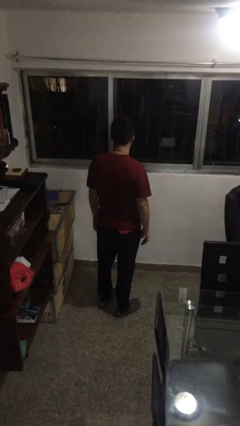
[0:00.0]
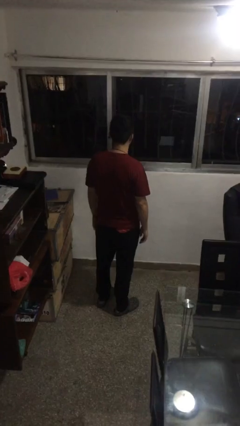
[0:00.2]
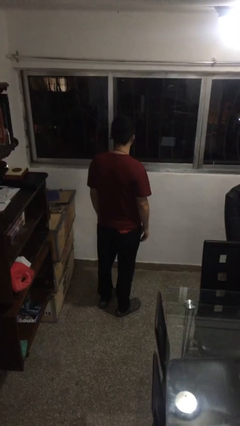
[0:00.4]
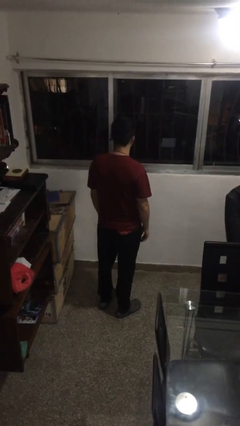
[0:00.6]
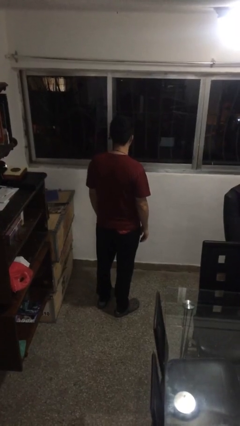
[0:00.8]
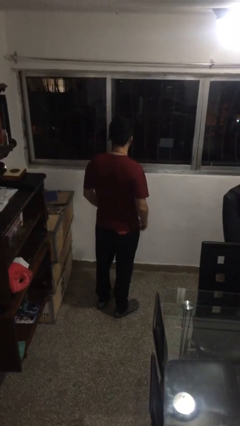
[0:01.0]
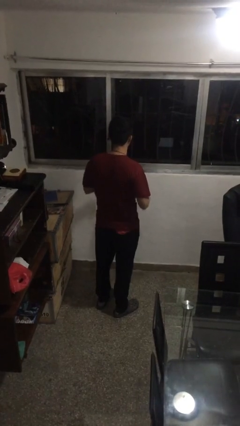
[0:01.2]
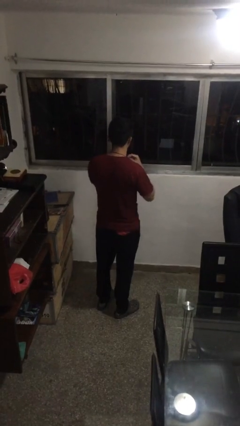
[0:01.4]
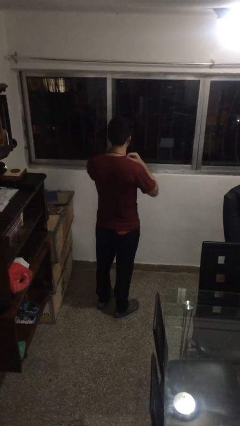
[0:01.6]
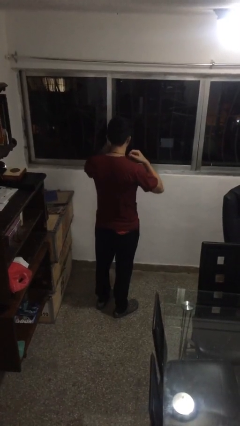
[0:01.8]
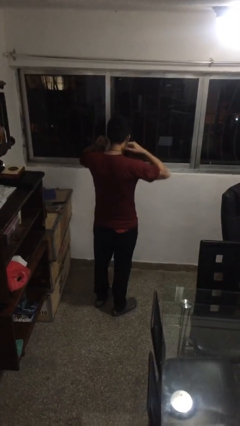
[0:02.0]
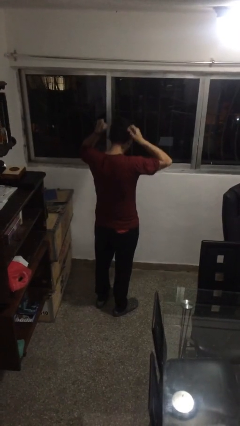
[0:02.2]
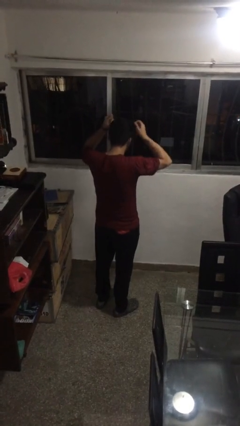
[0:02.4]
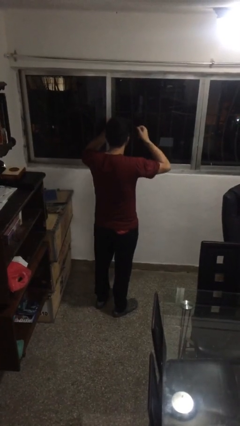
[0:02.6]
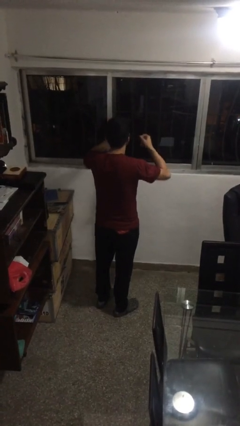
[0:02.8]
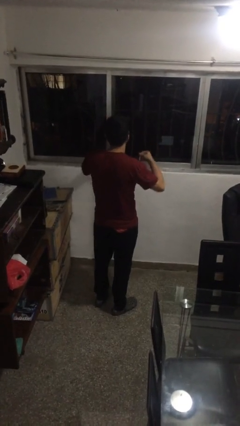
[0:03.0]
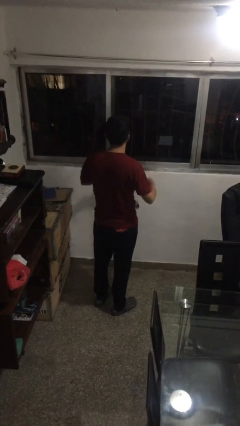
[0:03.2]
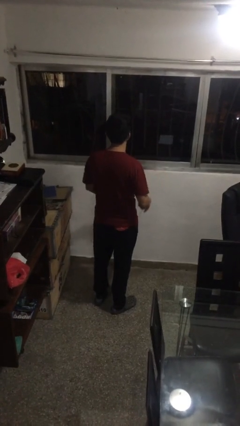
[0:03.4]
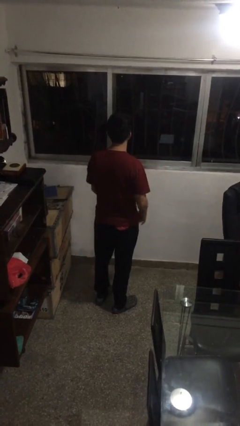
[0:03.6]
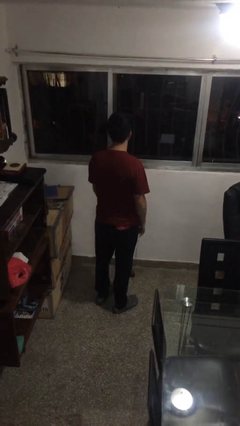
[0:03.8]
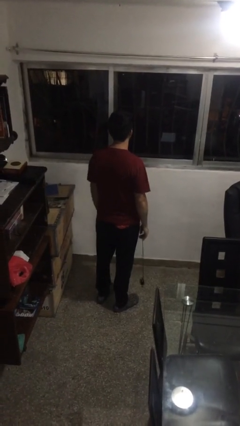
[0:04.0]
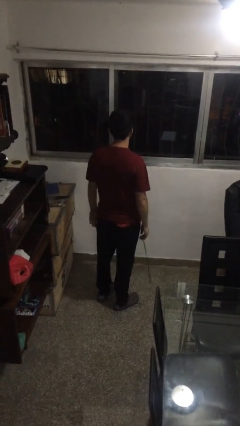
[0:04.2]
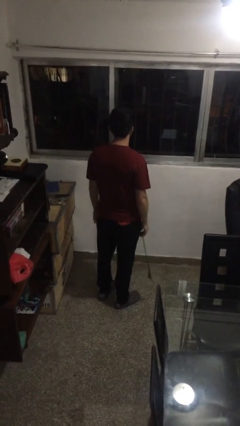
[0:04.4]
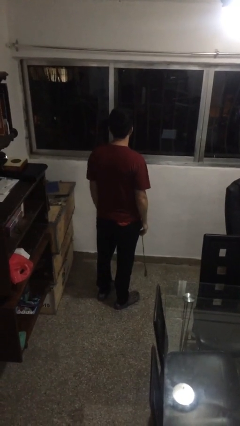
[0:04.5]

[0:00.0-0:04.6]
person takes off necklace

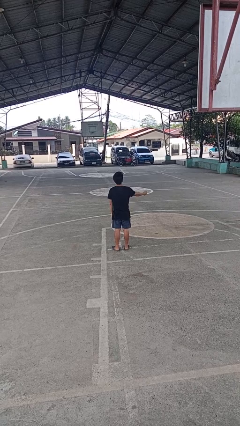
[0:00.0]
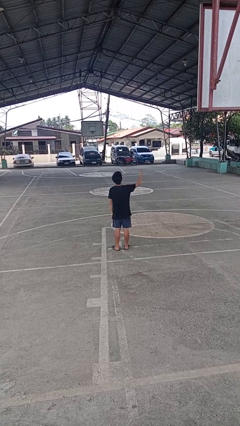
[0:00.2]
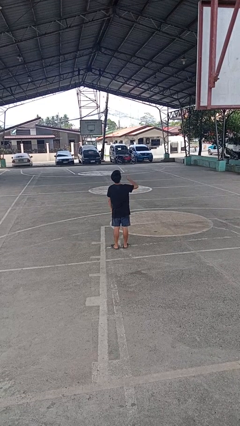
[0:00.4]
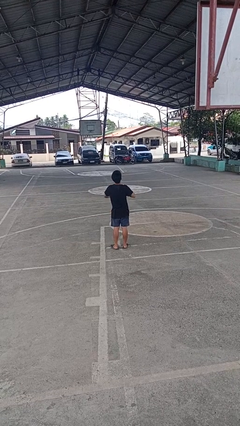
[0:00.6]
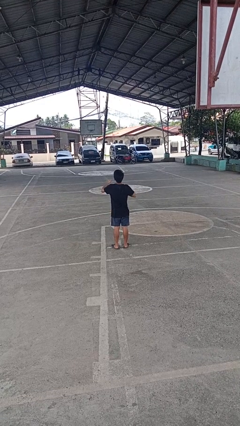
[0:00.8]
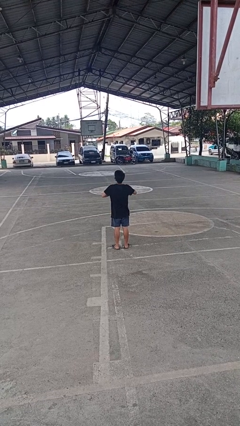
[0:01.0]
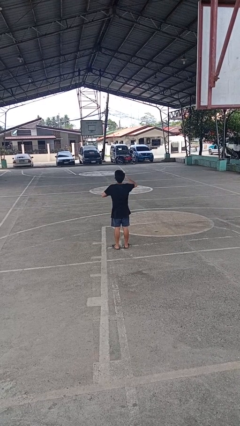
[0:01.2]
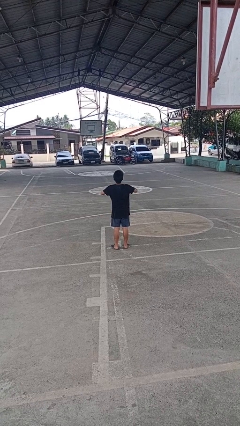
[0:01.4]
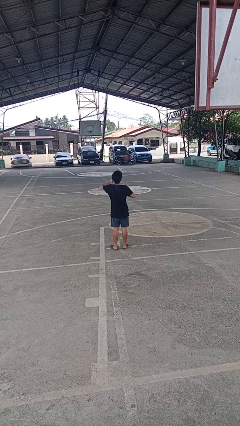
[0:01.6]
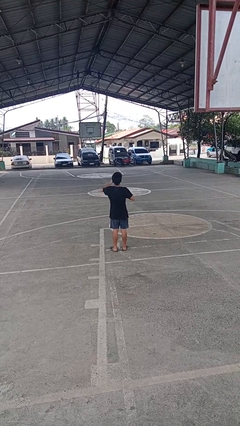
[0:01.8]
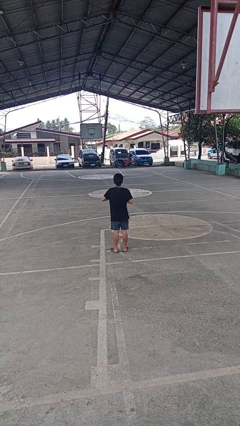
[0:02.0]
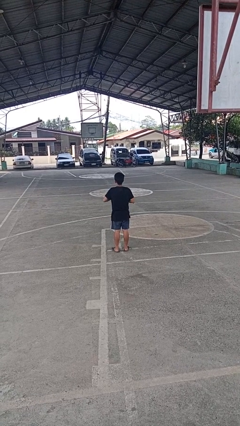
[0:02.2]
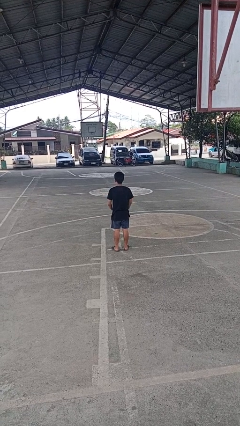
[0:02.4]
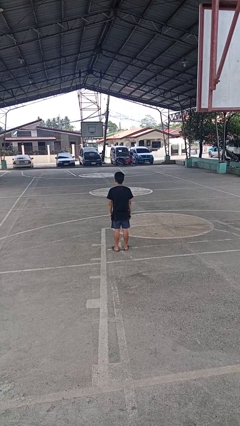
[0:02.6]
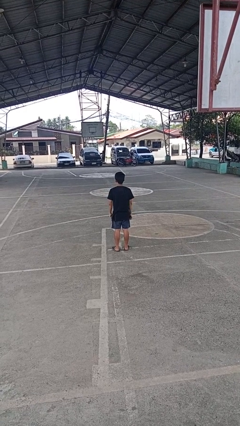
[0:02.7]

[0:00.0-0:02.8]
person drums on chest

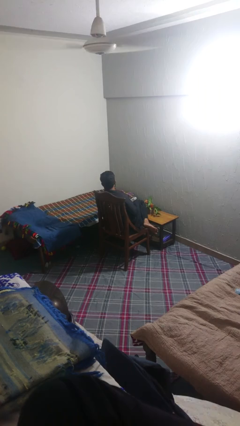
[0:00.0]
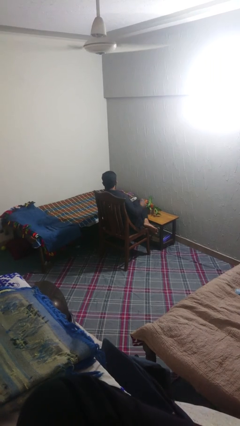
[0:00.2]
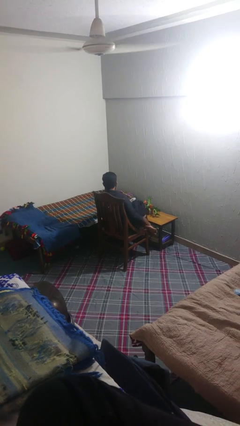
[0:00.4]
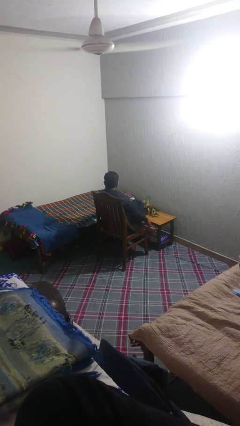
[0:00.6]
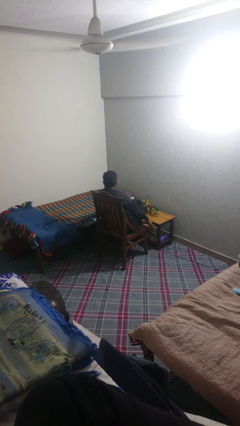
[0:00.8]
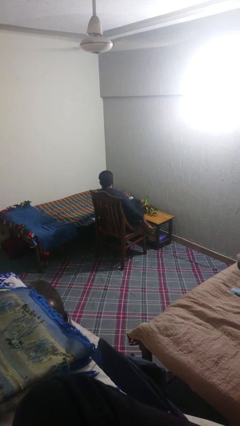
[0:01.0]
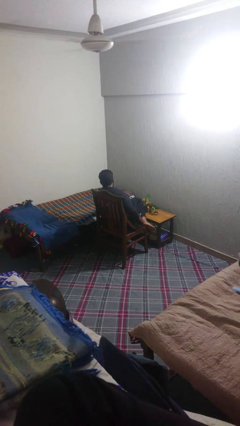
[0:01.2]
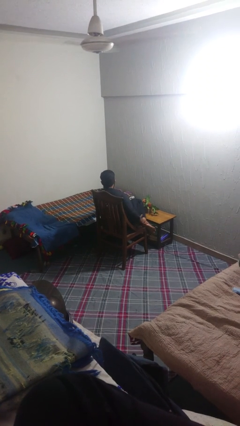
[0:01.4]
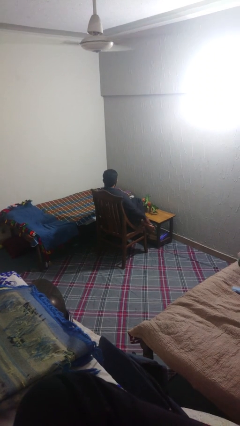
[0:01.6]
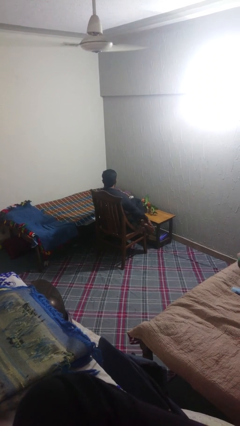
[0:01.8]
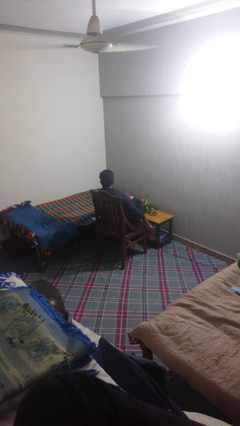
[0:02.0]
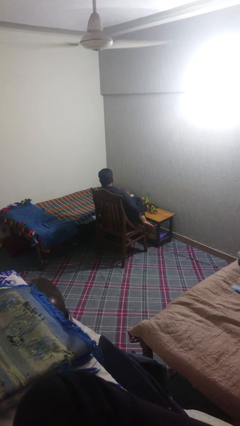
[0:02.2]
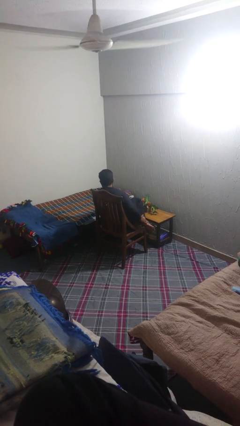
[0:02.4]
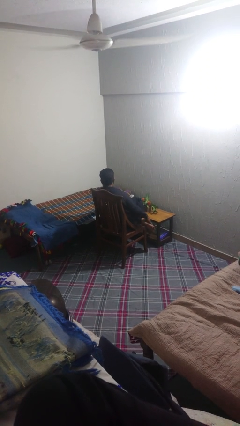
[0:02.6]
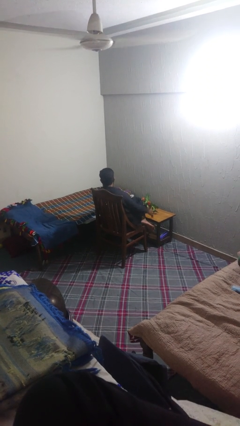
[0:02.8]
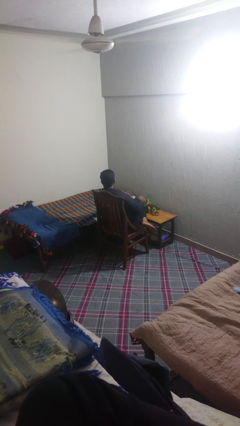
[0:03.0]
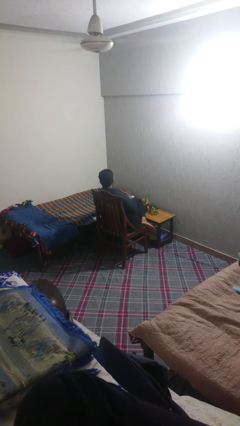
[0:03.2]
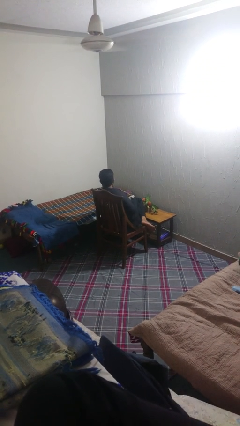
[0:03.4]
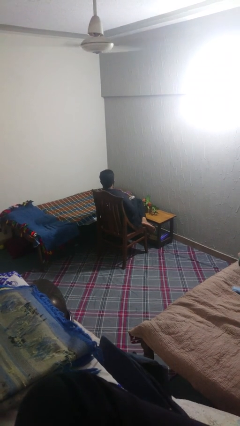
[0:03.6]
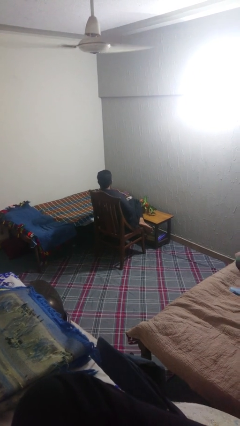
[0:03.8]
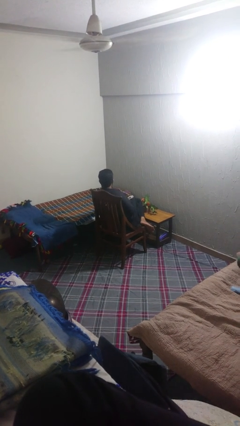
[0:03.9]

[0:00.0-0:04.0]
person rubs foot

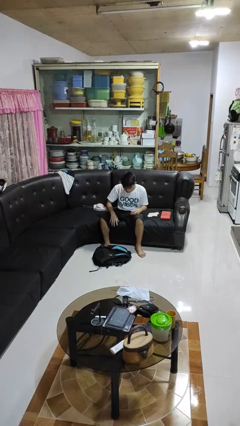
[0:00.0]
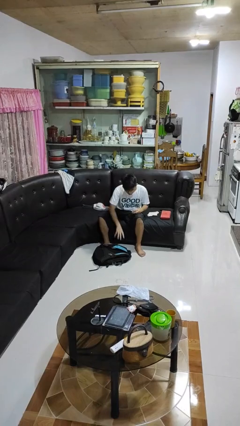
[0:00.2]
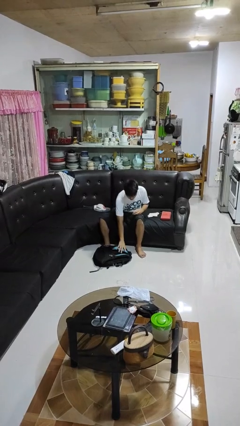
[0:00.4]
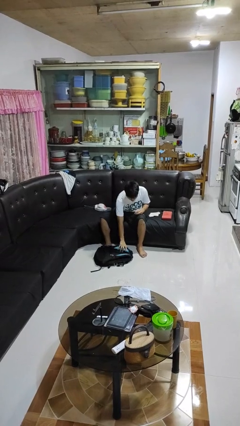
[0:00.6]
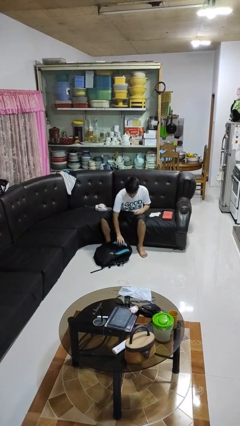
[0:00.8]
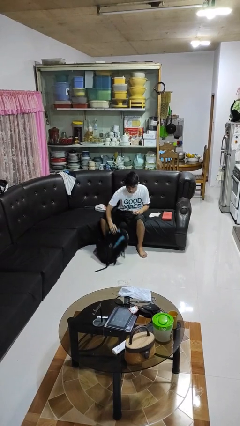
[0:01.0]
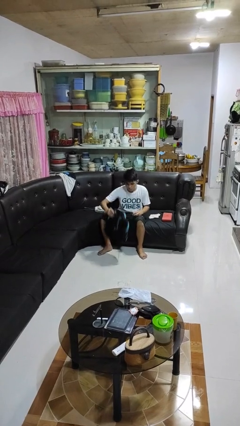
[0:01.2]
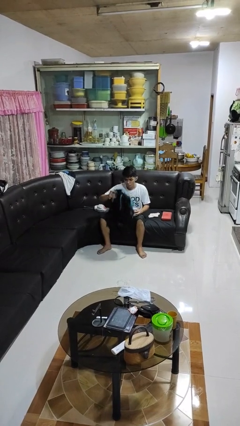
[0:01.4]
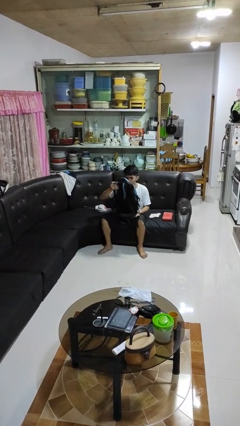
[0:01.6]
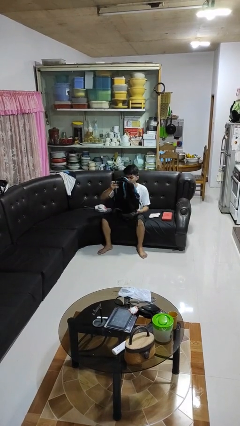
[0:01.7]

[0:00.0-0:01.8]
person picks up object from floor

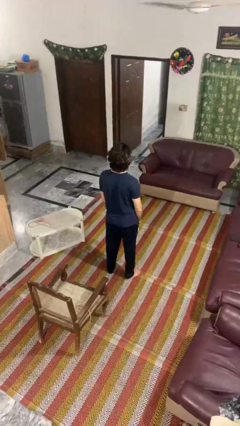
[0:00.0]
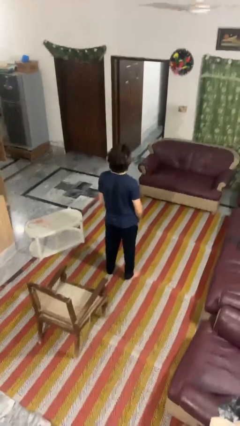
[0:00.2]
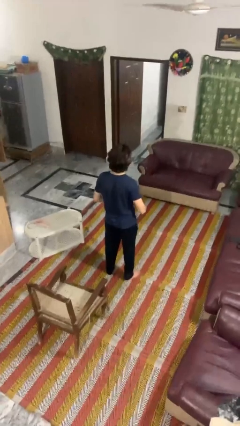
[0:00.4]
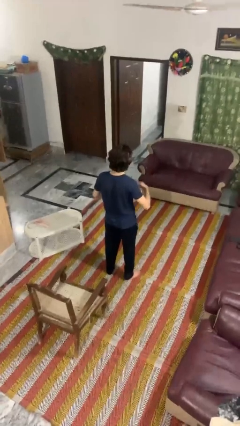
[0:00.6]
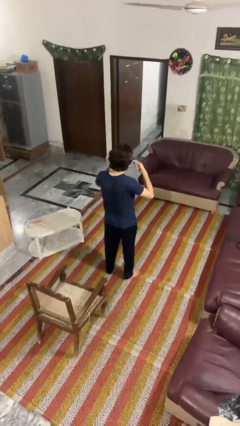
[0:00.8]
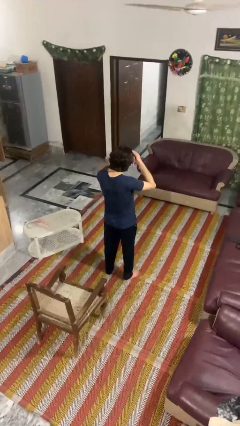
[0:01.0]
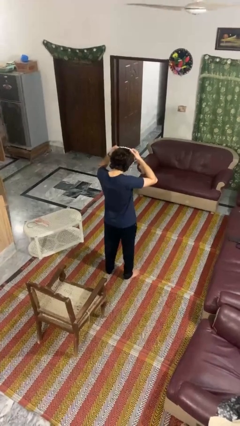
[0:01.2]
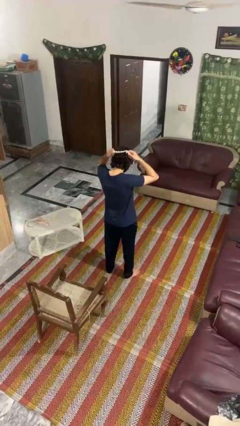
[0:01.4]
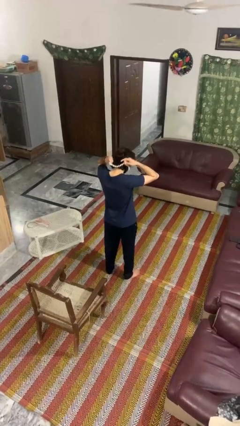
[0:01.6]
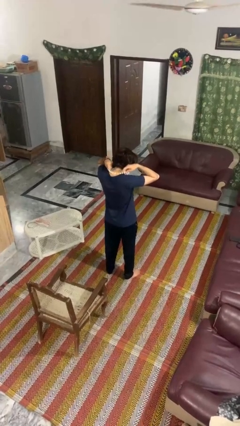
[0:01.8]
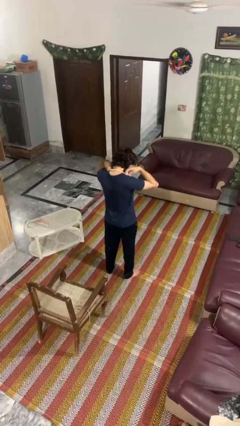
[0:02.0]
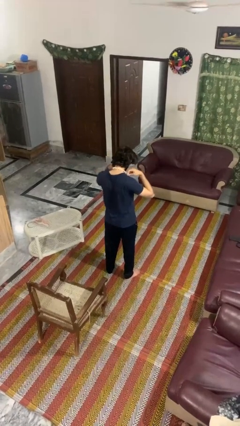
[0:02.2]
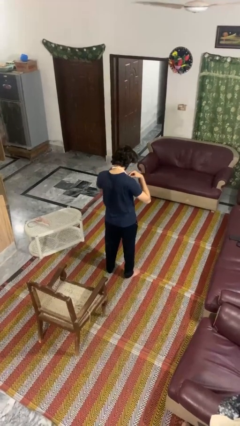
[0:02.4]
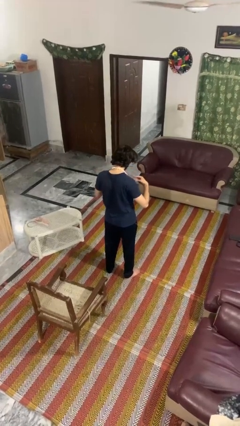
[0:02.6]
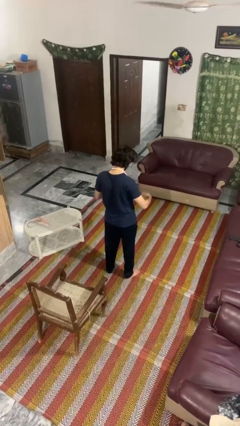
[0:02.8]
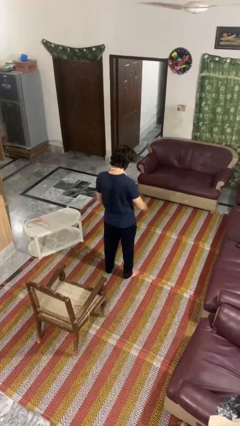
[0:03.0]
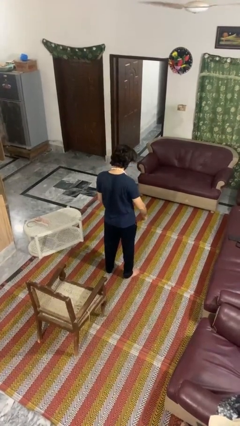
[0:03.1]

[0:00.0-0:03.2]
person puts on necklace

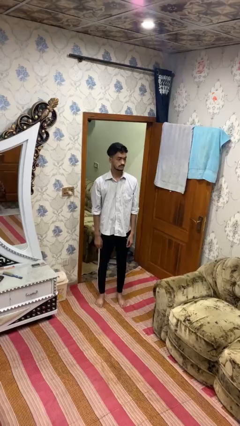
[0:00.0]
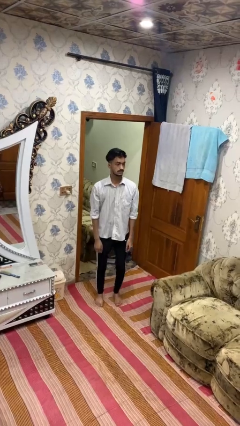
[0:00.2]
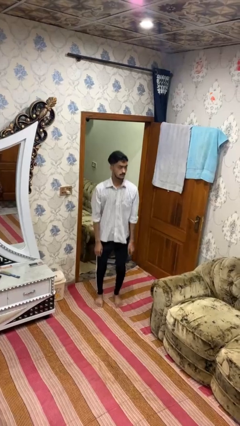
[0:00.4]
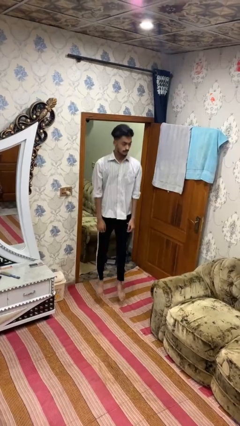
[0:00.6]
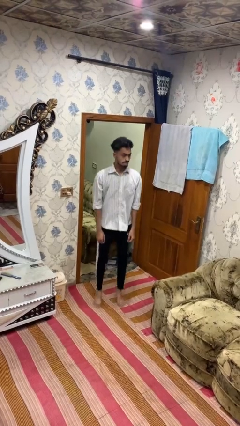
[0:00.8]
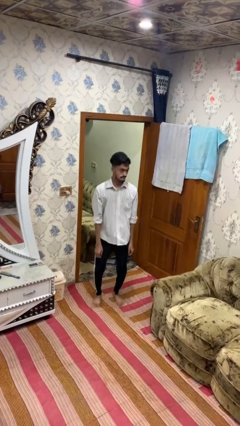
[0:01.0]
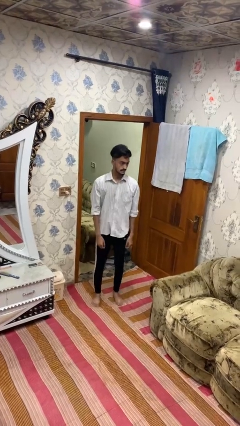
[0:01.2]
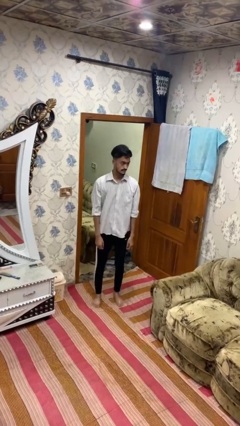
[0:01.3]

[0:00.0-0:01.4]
person jumps
